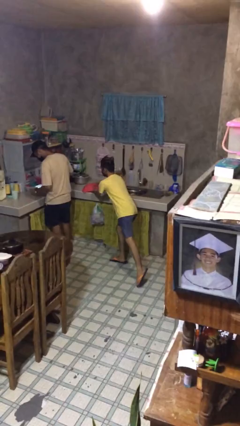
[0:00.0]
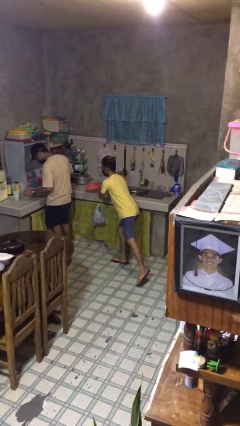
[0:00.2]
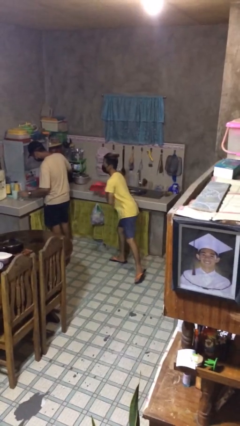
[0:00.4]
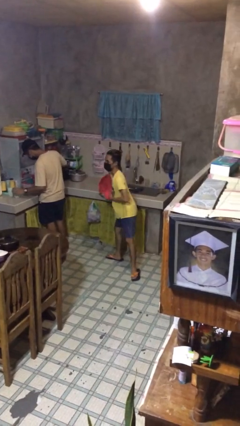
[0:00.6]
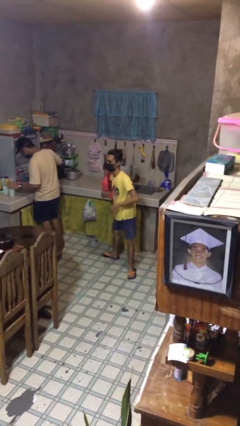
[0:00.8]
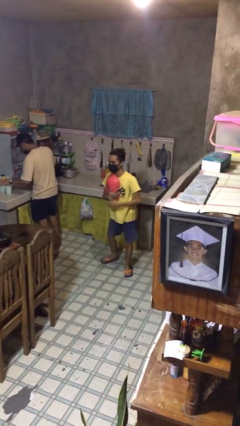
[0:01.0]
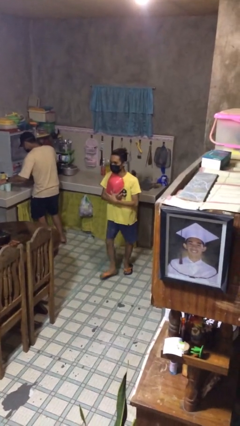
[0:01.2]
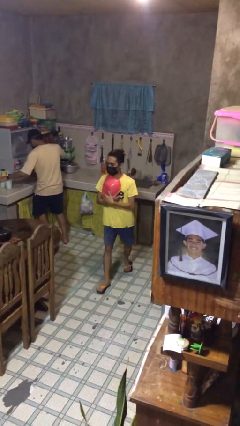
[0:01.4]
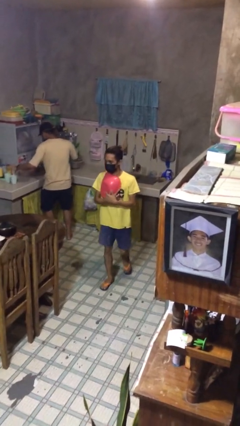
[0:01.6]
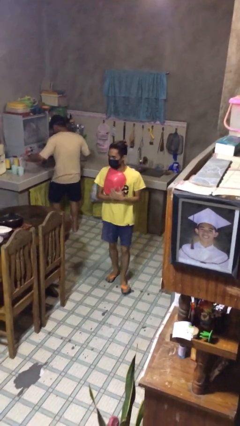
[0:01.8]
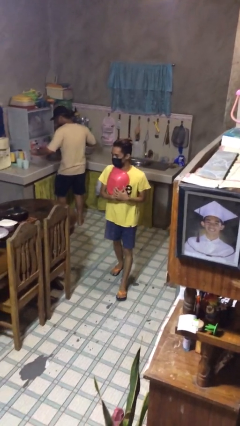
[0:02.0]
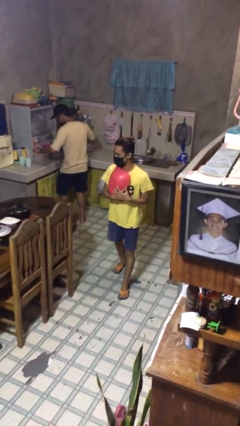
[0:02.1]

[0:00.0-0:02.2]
person steals object from person

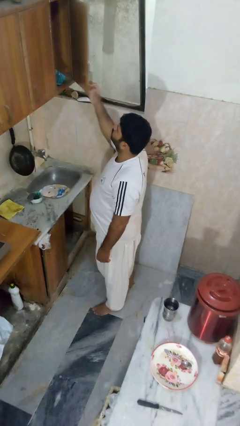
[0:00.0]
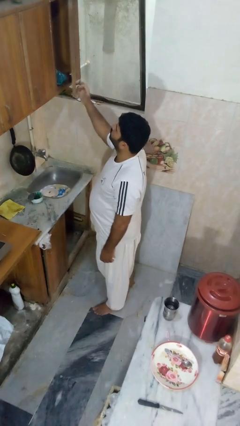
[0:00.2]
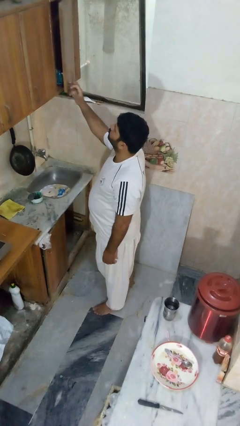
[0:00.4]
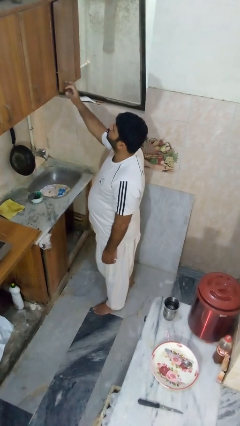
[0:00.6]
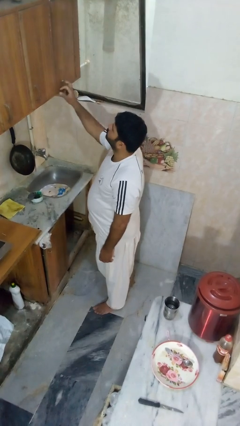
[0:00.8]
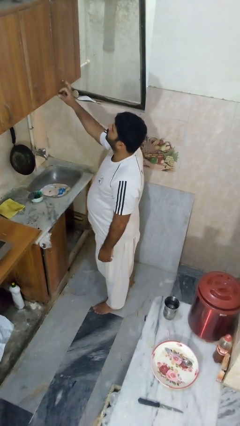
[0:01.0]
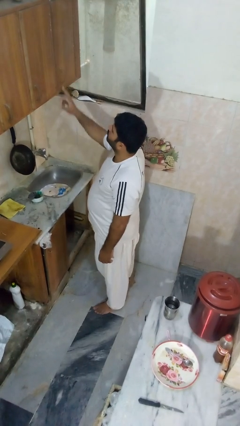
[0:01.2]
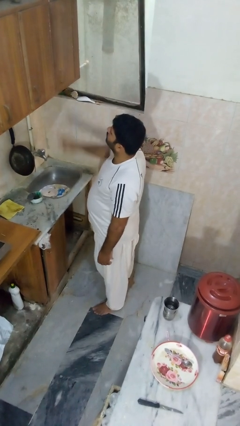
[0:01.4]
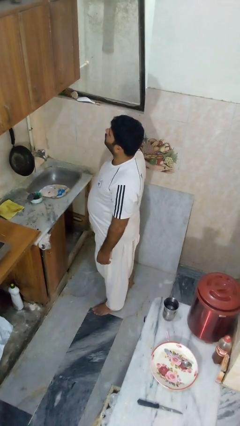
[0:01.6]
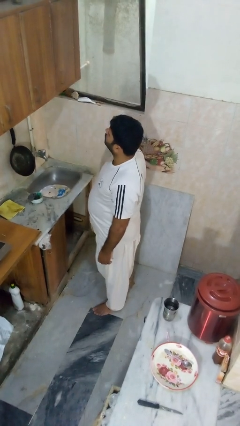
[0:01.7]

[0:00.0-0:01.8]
person closes cabinet

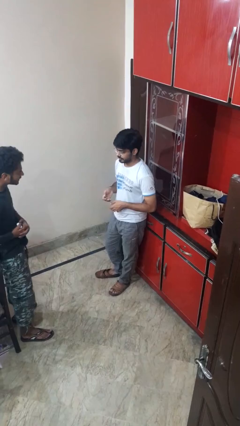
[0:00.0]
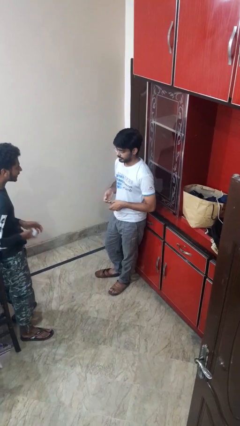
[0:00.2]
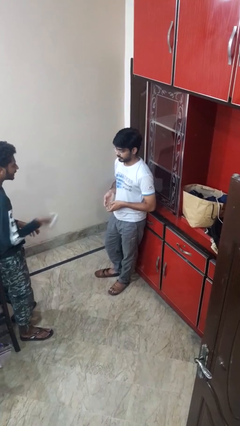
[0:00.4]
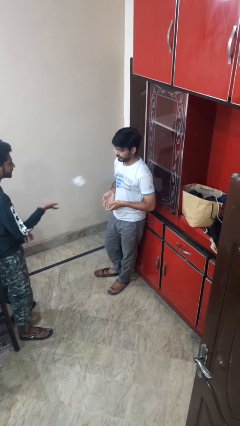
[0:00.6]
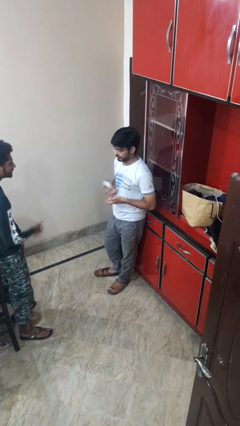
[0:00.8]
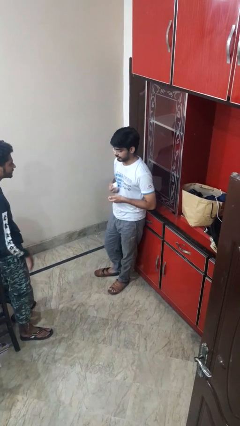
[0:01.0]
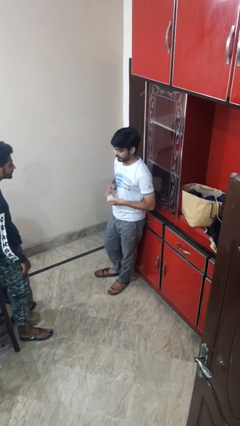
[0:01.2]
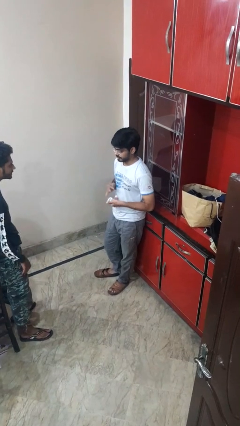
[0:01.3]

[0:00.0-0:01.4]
person catches object from person

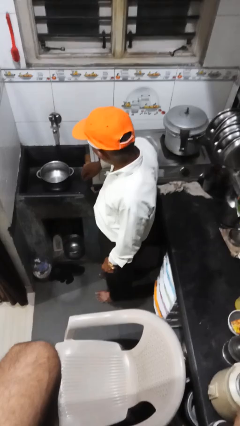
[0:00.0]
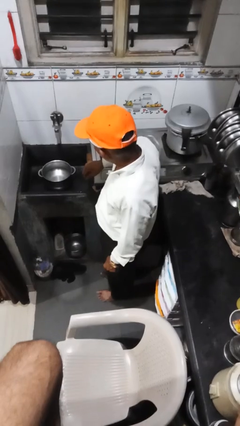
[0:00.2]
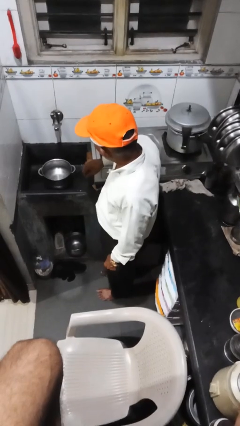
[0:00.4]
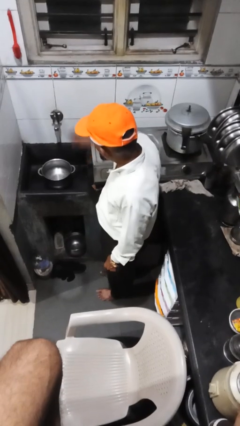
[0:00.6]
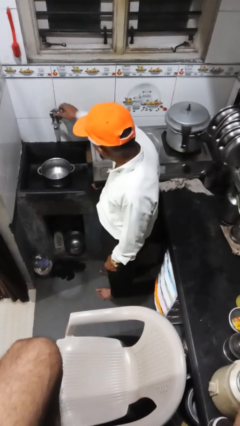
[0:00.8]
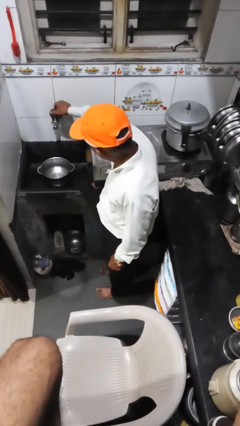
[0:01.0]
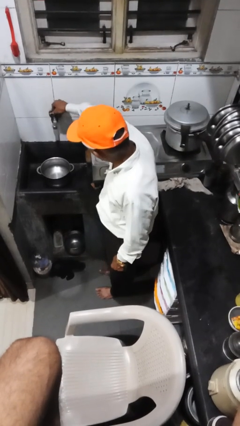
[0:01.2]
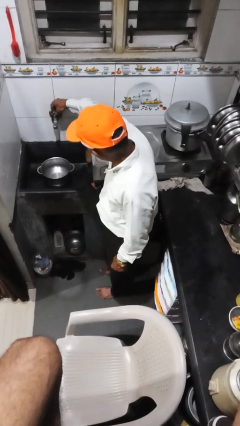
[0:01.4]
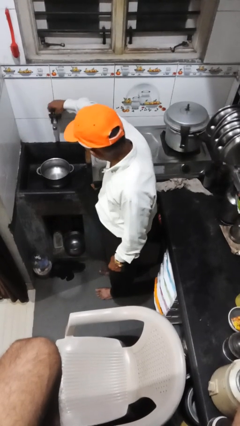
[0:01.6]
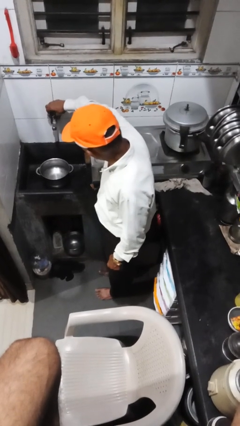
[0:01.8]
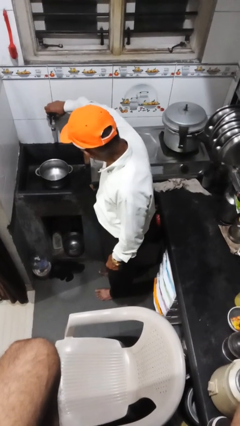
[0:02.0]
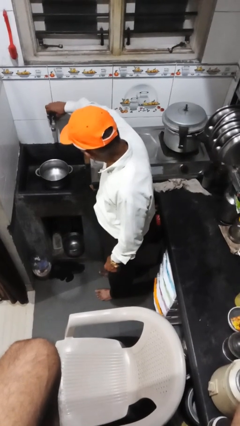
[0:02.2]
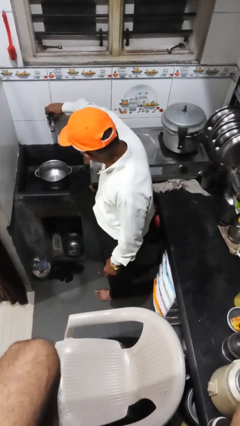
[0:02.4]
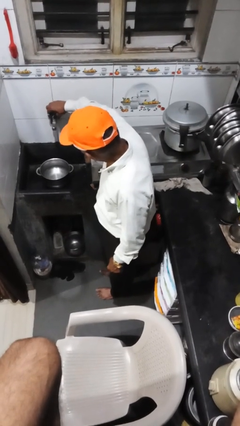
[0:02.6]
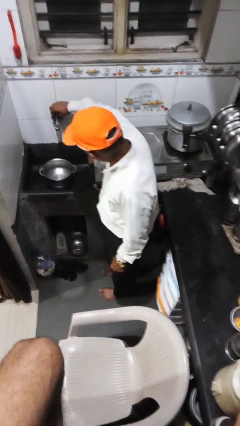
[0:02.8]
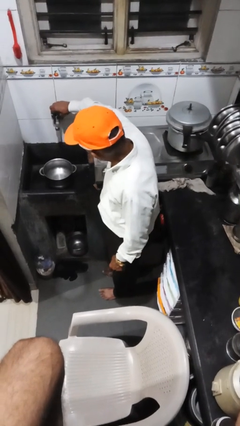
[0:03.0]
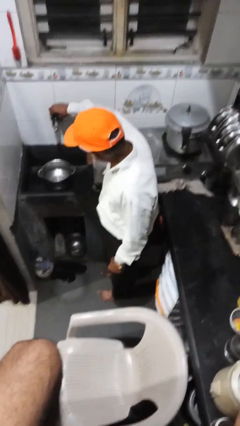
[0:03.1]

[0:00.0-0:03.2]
person turns on faucet

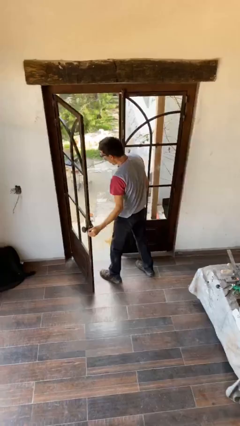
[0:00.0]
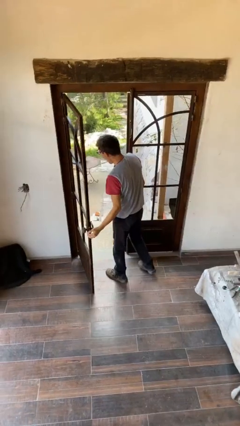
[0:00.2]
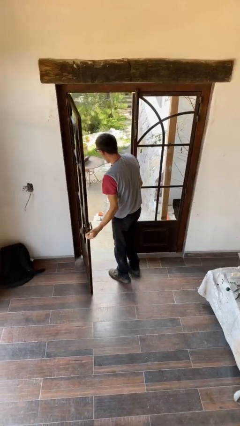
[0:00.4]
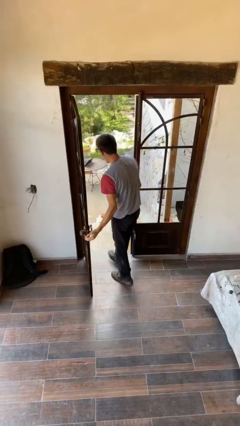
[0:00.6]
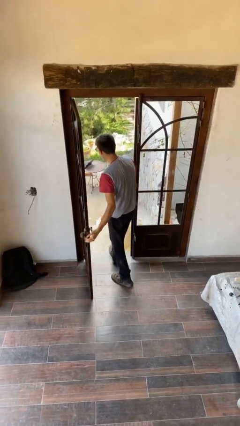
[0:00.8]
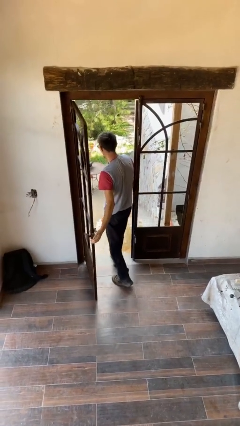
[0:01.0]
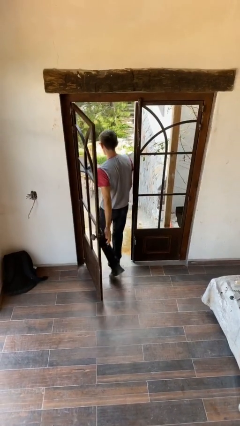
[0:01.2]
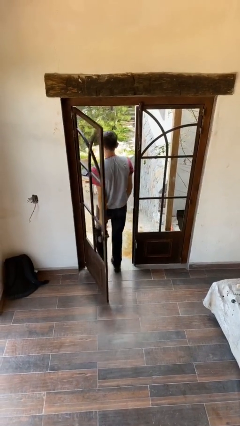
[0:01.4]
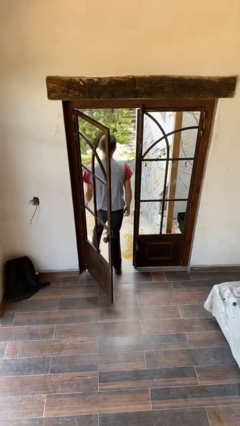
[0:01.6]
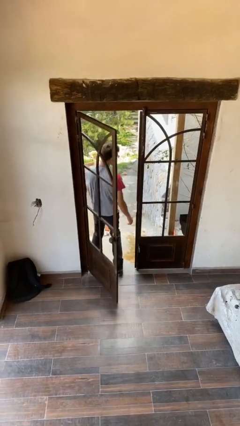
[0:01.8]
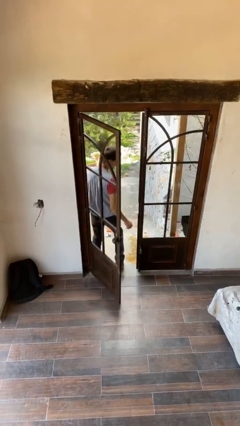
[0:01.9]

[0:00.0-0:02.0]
person exits scene through structure

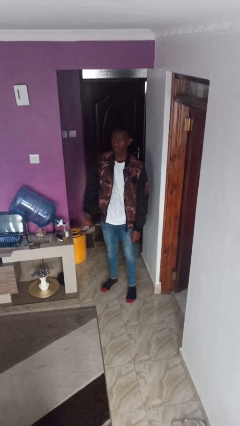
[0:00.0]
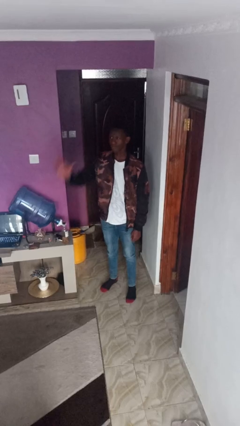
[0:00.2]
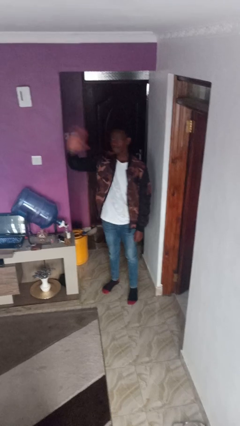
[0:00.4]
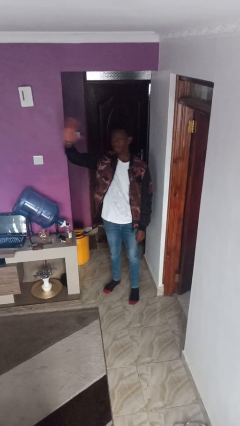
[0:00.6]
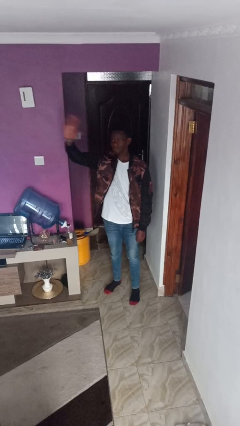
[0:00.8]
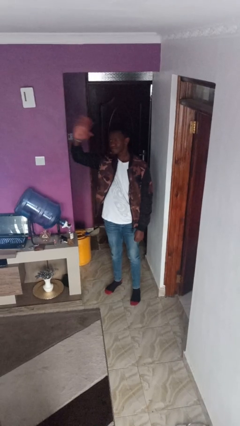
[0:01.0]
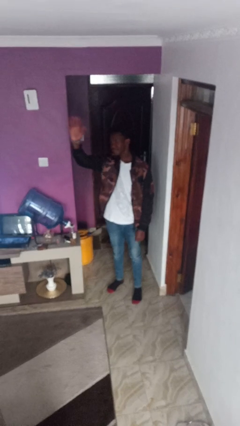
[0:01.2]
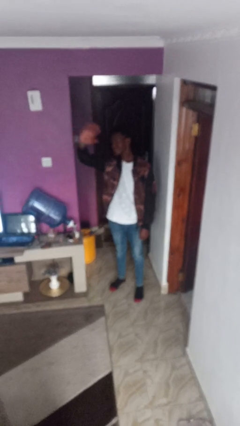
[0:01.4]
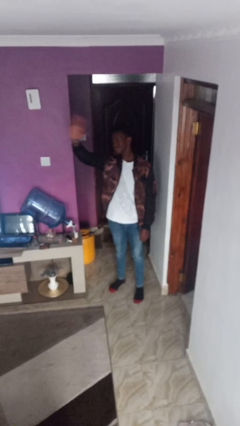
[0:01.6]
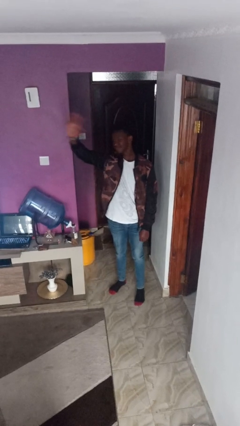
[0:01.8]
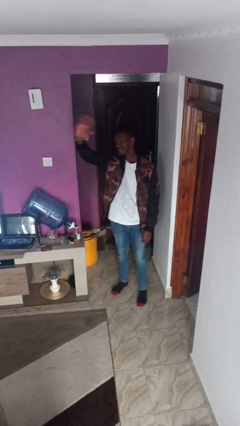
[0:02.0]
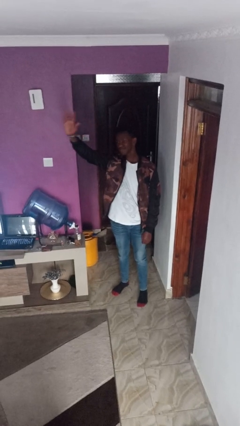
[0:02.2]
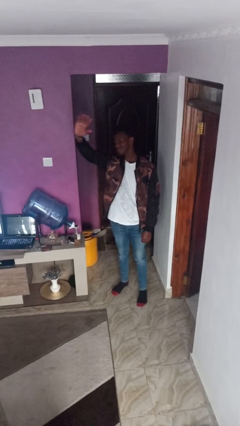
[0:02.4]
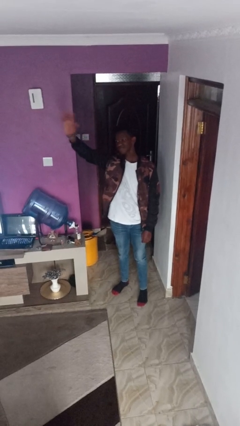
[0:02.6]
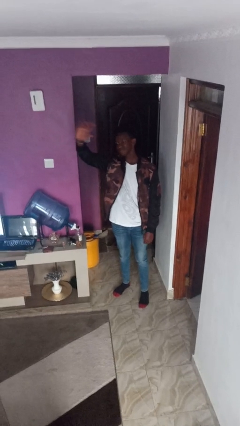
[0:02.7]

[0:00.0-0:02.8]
person waves at person

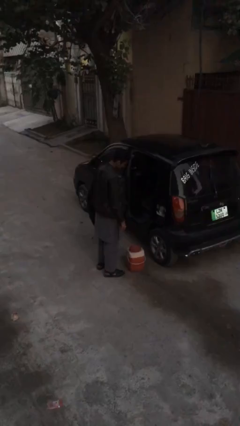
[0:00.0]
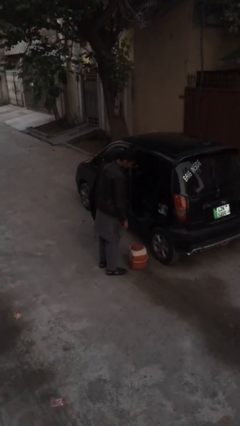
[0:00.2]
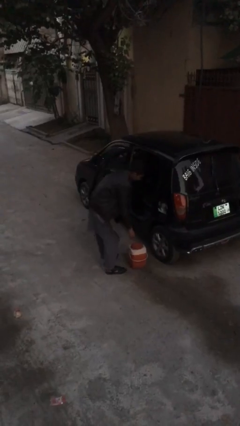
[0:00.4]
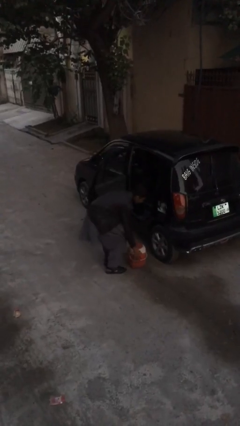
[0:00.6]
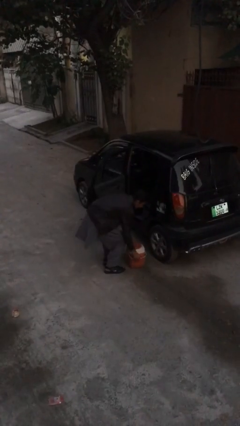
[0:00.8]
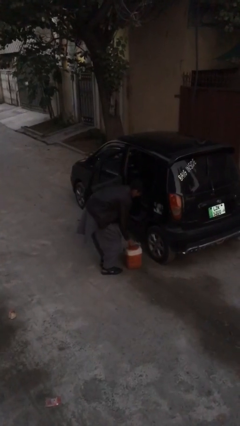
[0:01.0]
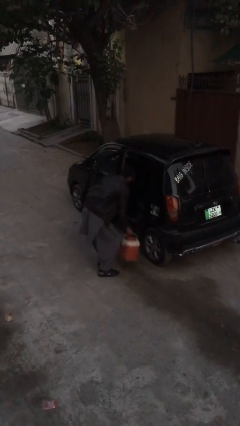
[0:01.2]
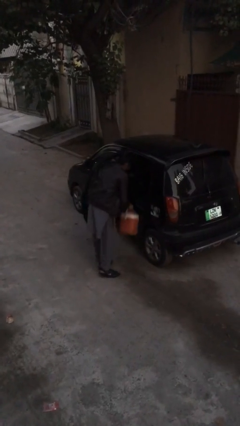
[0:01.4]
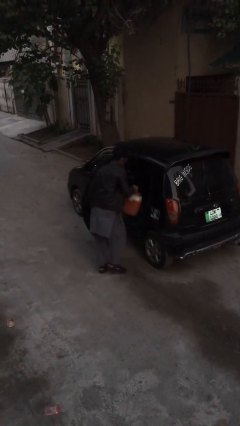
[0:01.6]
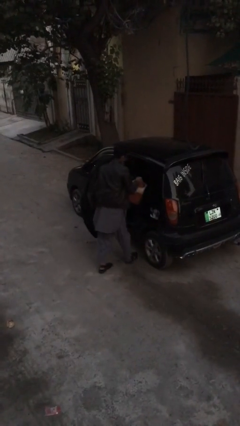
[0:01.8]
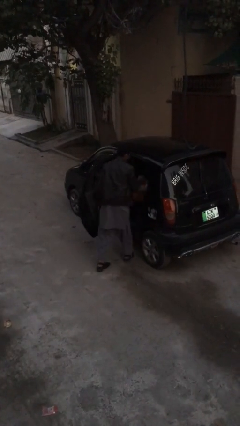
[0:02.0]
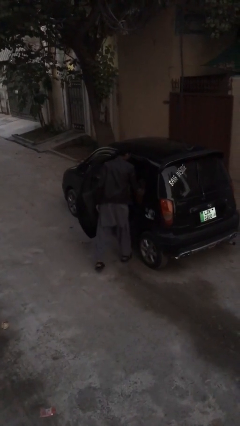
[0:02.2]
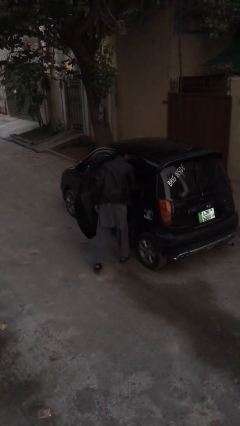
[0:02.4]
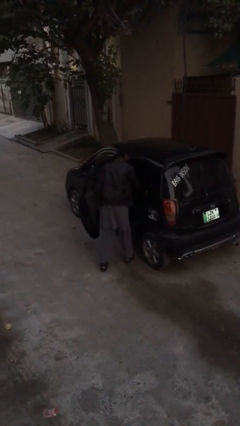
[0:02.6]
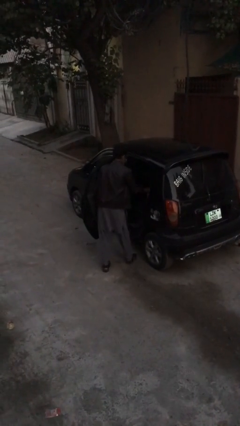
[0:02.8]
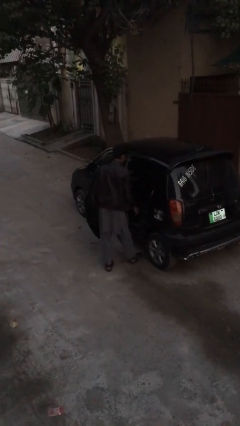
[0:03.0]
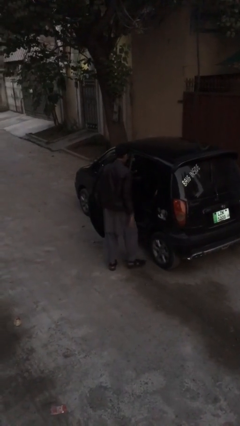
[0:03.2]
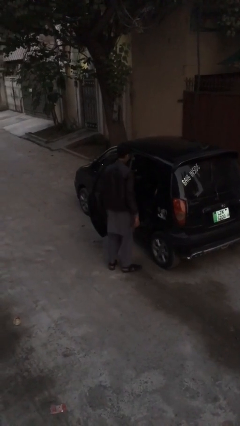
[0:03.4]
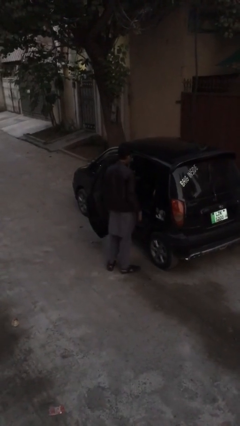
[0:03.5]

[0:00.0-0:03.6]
person loads car
